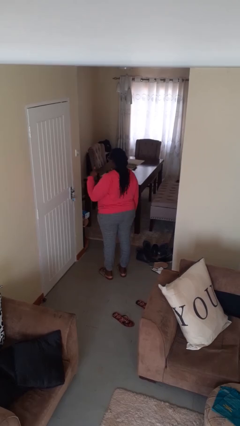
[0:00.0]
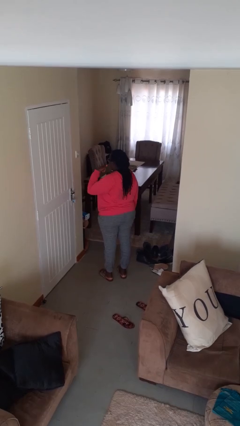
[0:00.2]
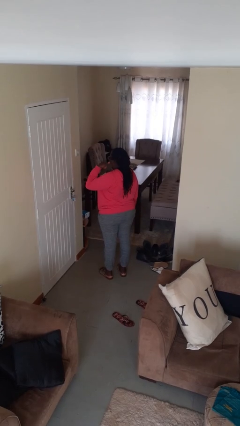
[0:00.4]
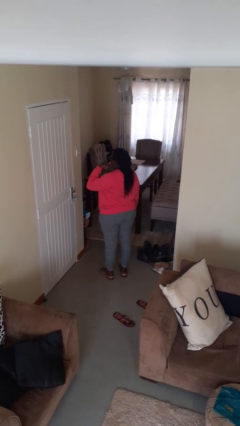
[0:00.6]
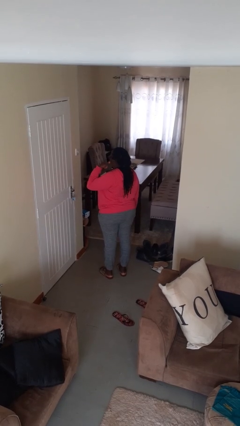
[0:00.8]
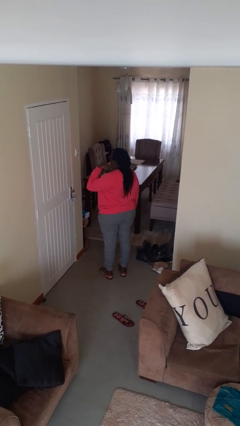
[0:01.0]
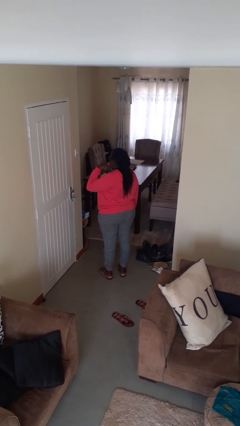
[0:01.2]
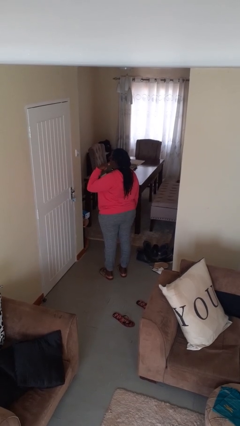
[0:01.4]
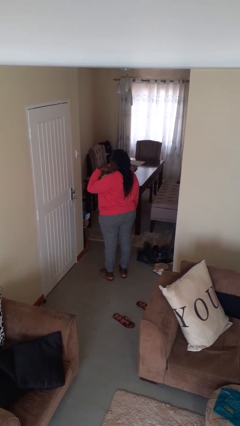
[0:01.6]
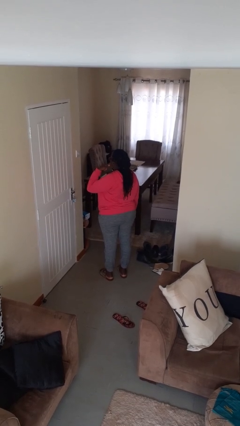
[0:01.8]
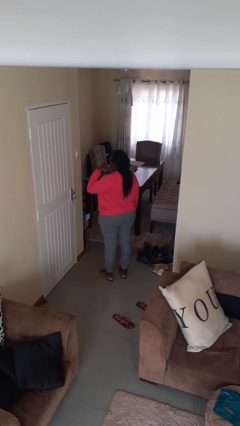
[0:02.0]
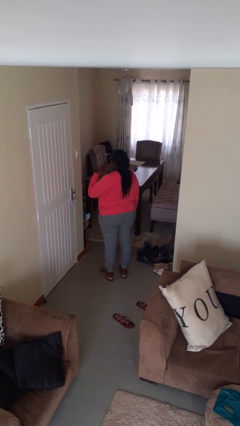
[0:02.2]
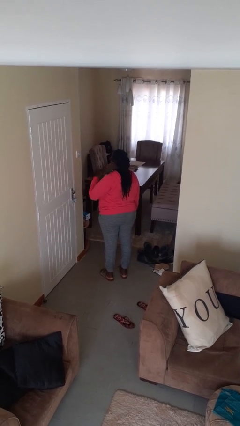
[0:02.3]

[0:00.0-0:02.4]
person gestures call me

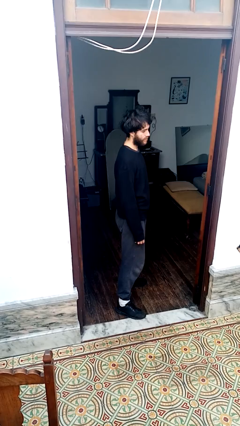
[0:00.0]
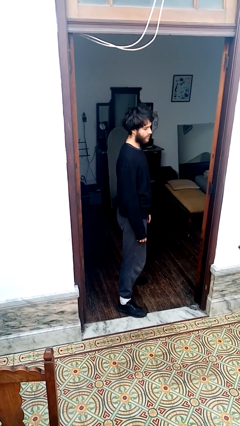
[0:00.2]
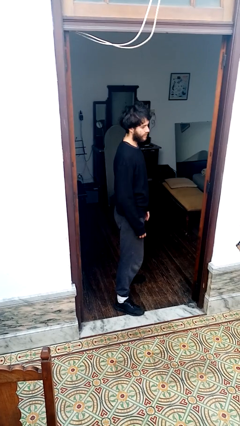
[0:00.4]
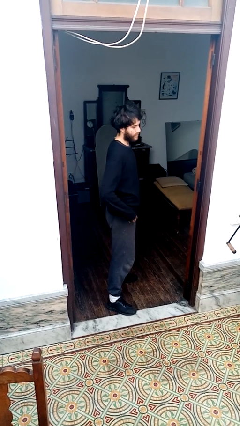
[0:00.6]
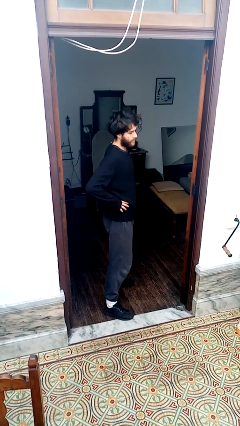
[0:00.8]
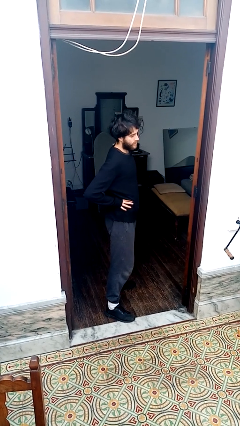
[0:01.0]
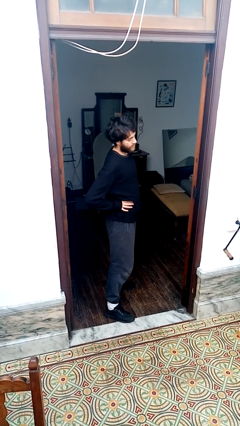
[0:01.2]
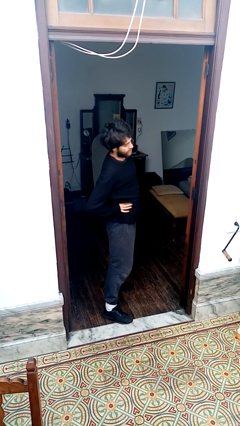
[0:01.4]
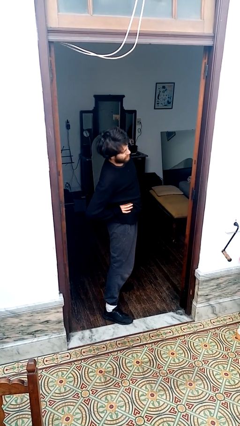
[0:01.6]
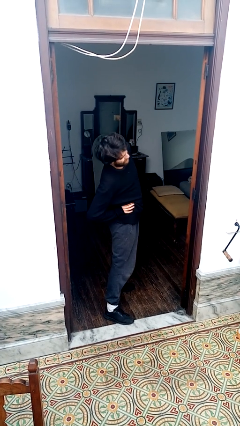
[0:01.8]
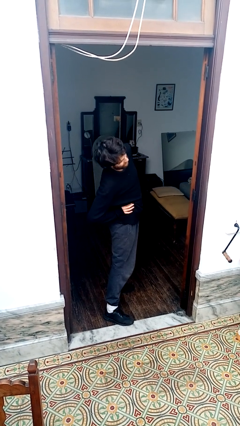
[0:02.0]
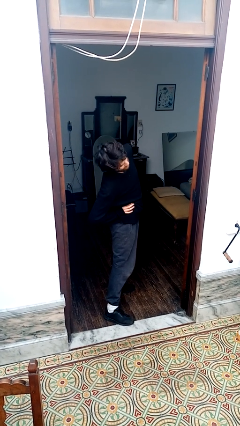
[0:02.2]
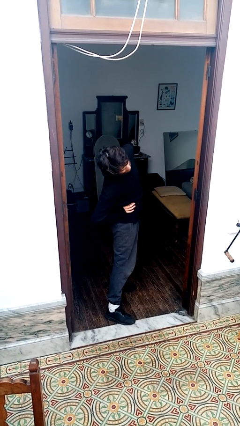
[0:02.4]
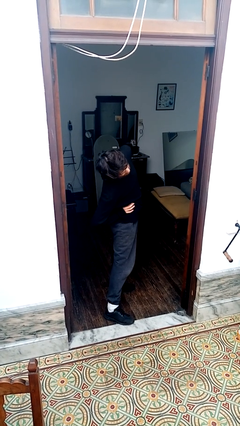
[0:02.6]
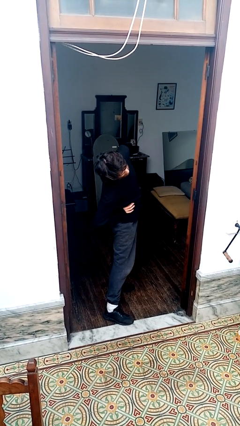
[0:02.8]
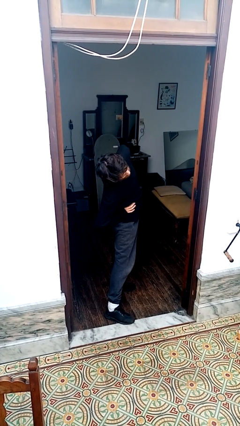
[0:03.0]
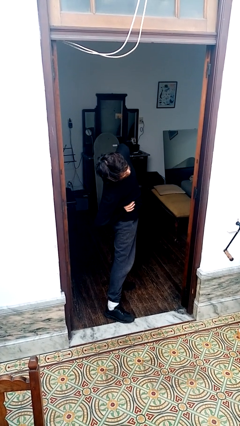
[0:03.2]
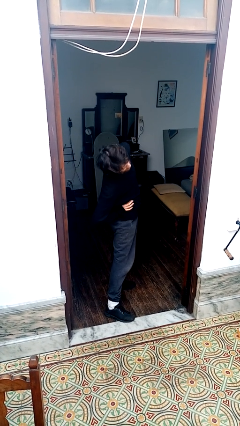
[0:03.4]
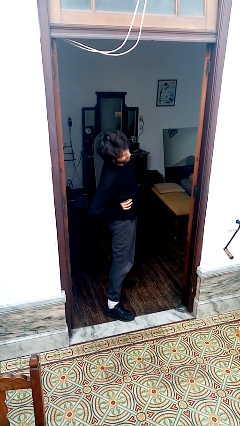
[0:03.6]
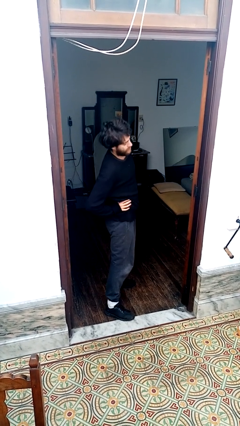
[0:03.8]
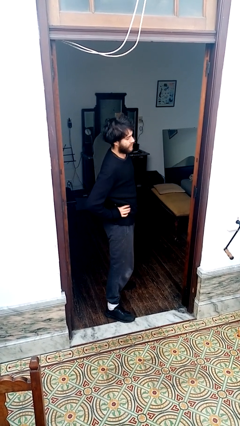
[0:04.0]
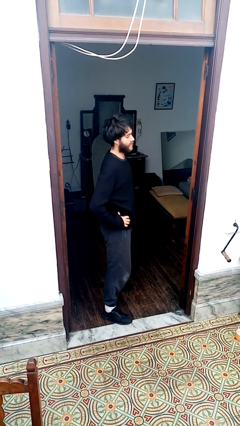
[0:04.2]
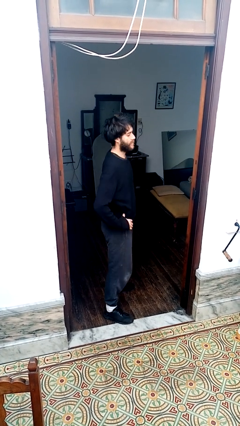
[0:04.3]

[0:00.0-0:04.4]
person stretches arms to side

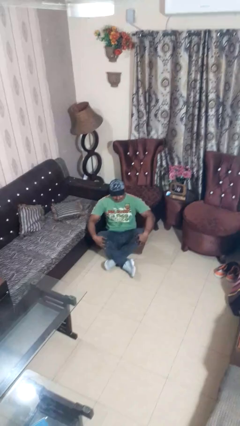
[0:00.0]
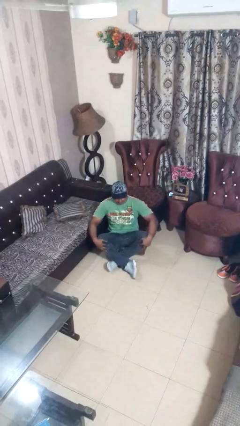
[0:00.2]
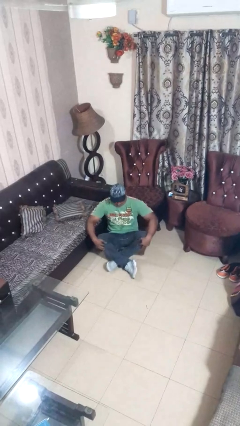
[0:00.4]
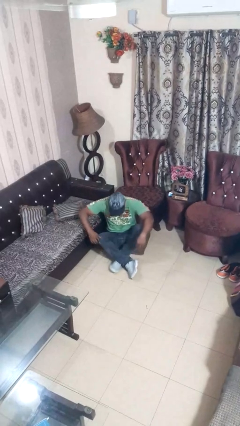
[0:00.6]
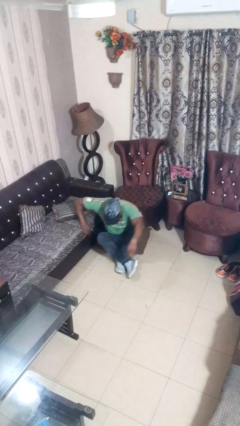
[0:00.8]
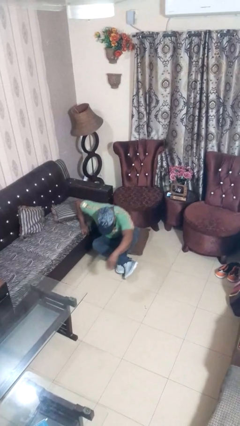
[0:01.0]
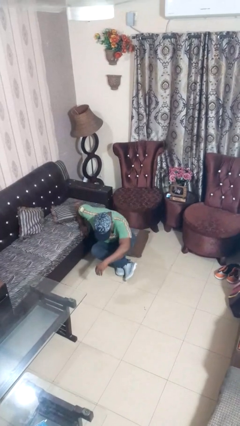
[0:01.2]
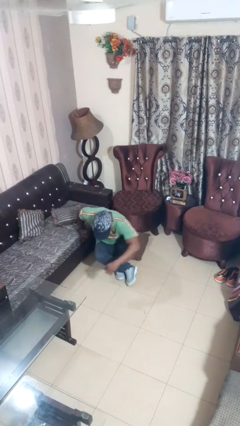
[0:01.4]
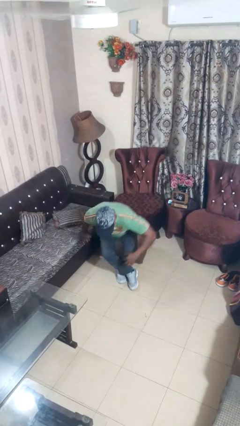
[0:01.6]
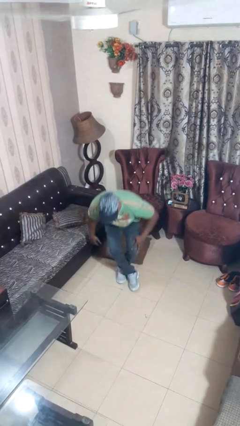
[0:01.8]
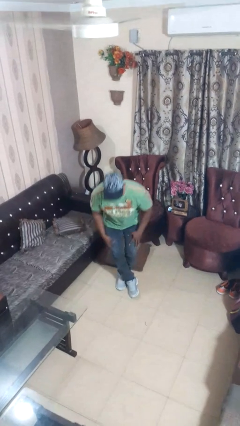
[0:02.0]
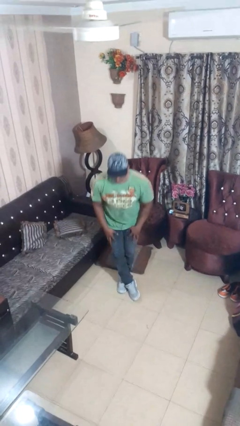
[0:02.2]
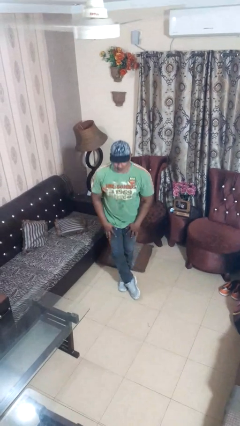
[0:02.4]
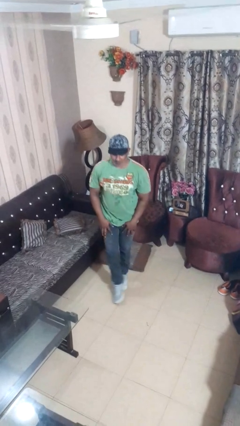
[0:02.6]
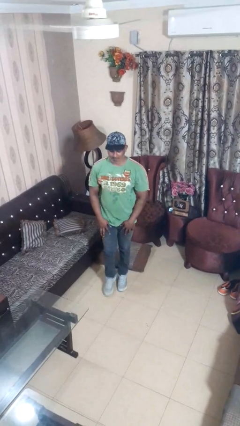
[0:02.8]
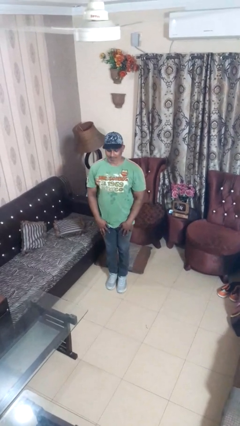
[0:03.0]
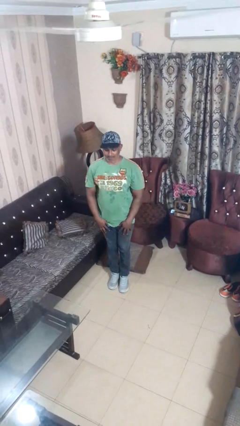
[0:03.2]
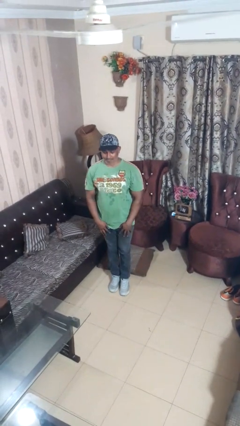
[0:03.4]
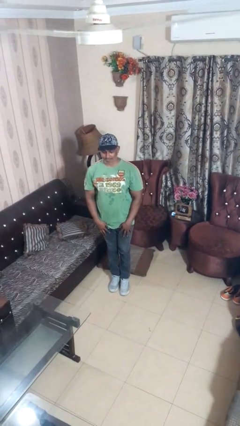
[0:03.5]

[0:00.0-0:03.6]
person stands up from floor

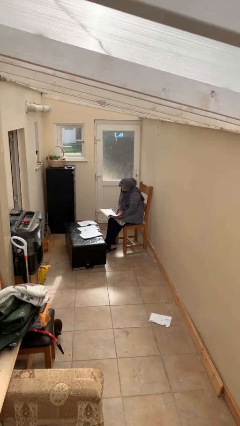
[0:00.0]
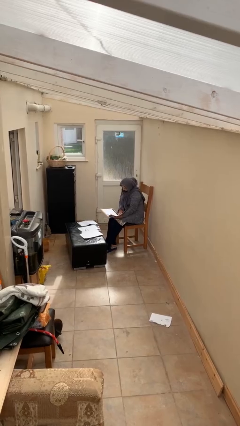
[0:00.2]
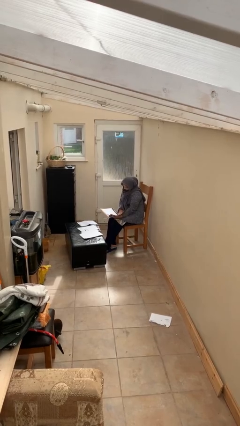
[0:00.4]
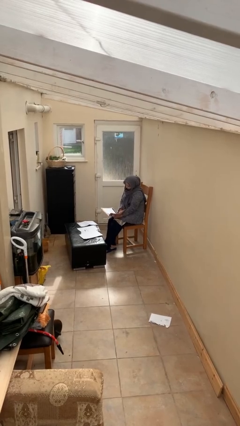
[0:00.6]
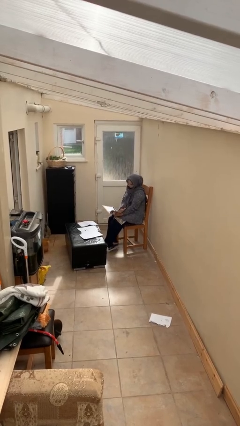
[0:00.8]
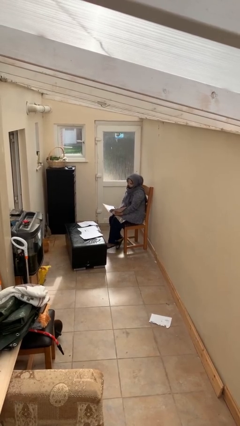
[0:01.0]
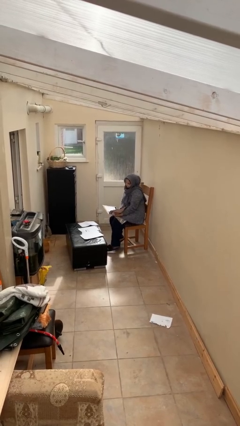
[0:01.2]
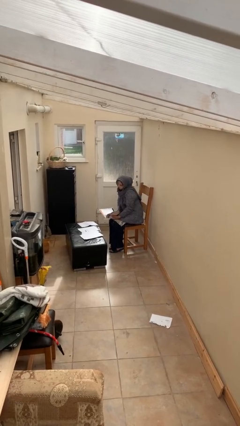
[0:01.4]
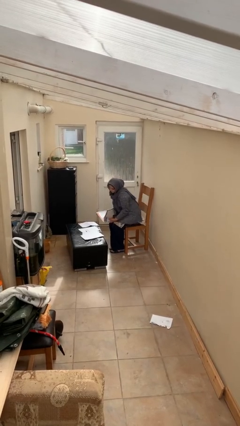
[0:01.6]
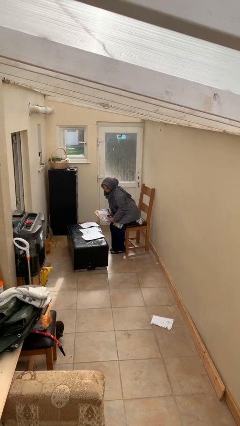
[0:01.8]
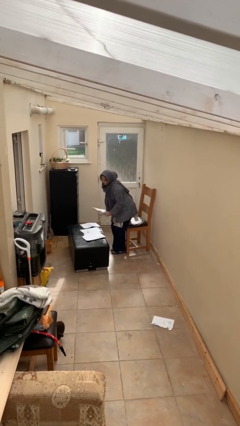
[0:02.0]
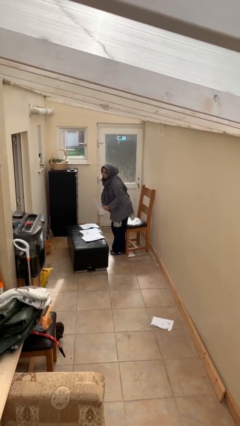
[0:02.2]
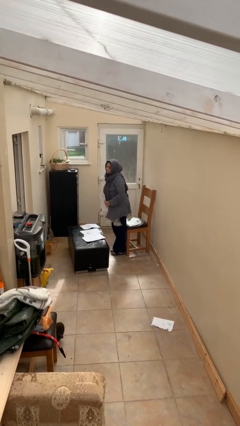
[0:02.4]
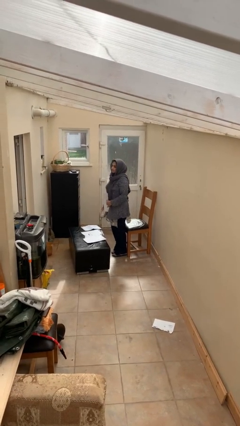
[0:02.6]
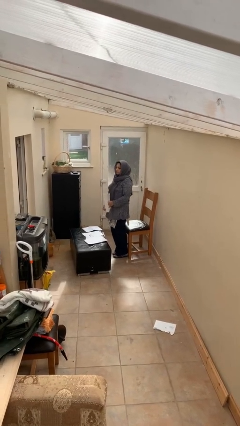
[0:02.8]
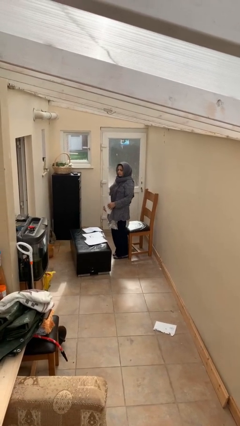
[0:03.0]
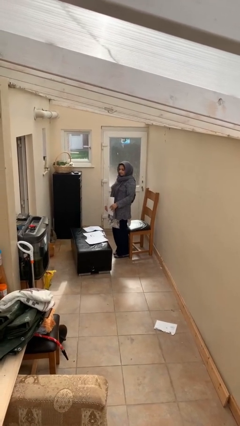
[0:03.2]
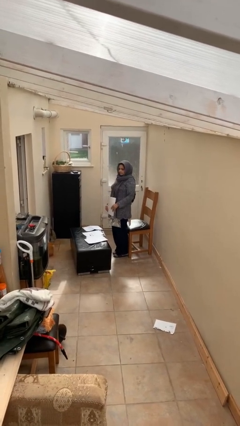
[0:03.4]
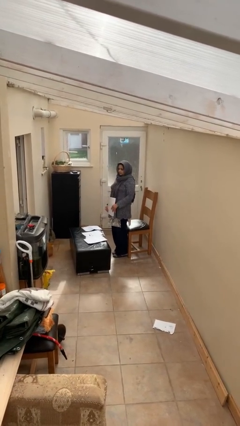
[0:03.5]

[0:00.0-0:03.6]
person stands up

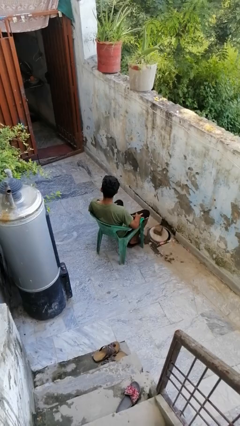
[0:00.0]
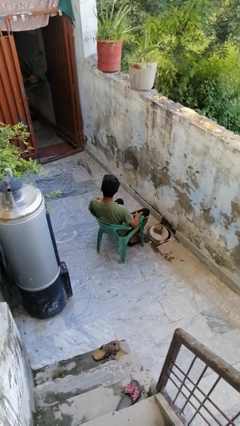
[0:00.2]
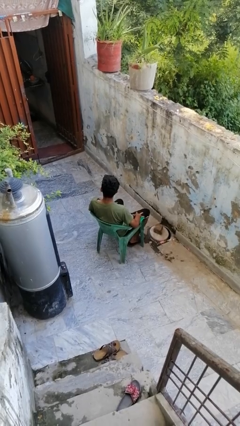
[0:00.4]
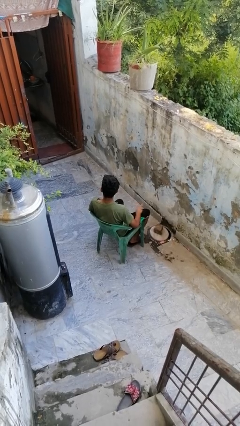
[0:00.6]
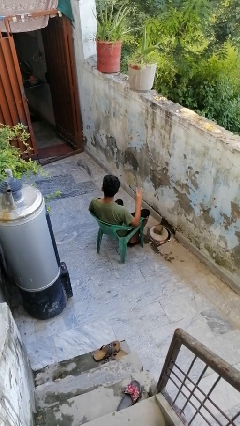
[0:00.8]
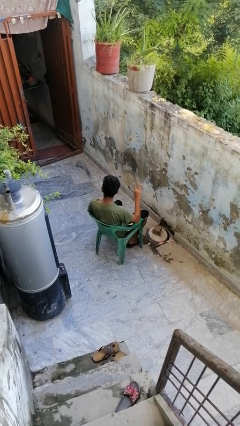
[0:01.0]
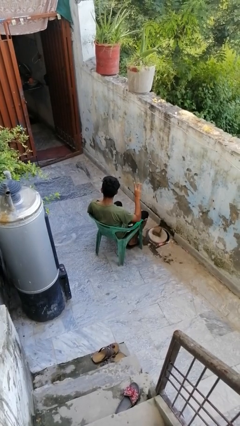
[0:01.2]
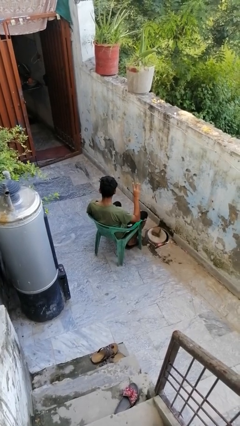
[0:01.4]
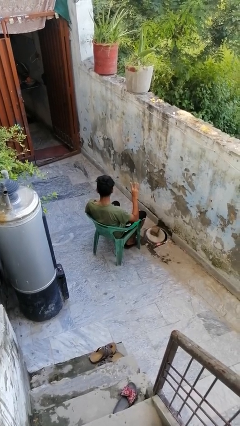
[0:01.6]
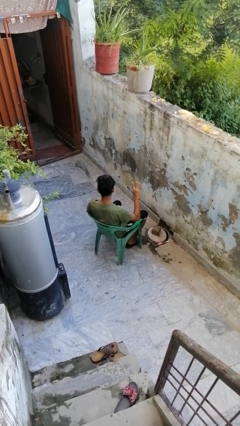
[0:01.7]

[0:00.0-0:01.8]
person gestures number three

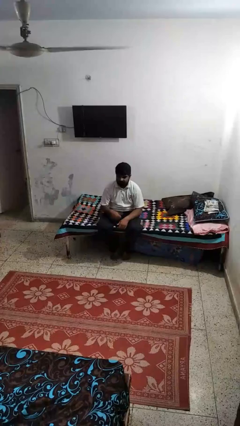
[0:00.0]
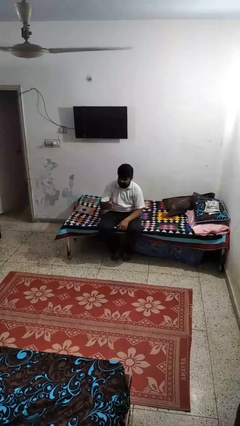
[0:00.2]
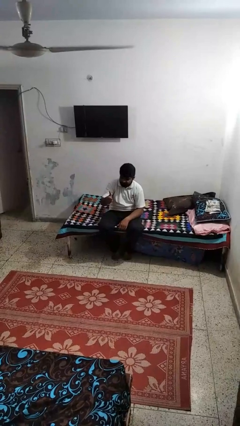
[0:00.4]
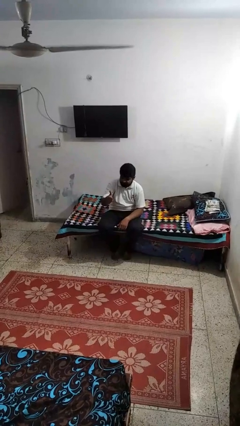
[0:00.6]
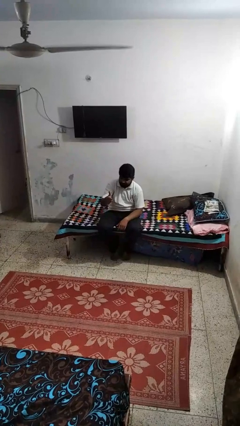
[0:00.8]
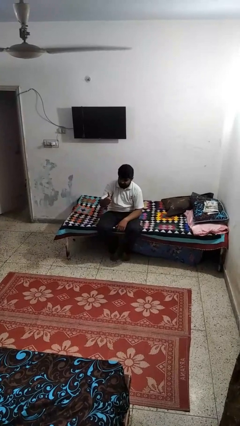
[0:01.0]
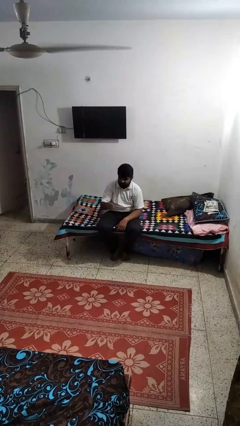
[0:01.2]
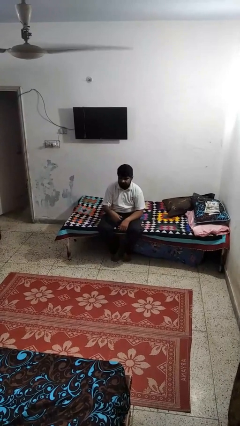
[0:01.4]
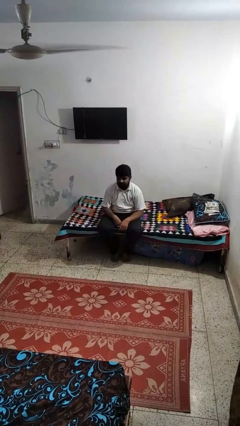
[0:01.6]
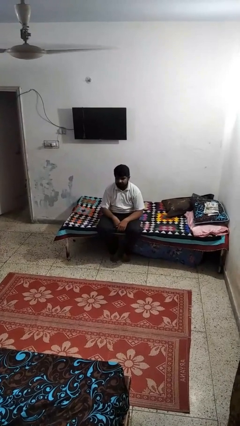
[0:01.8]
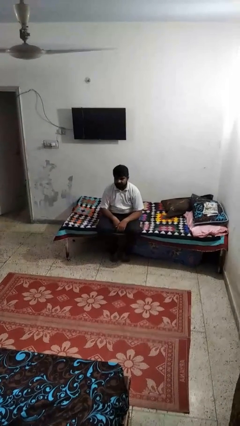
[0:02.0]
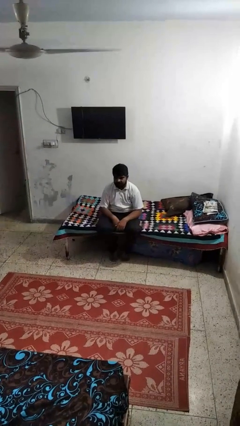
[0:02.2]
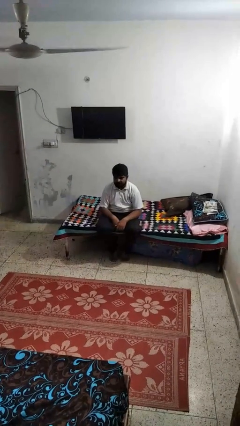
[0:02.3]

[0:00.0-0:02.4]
person gestures thumbs up
